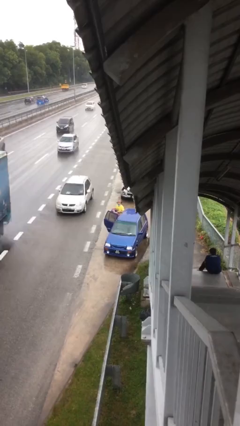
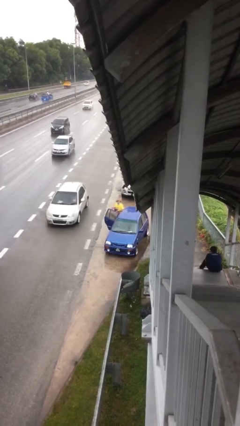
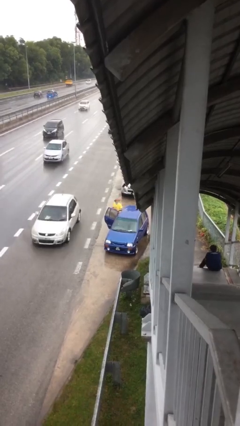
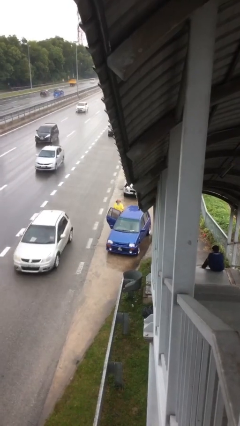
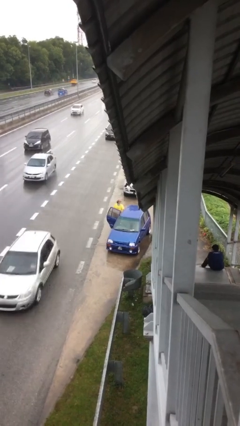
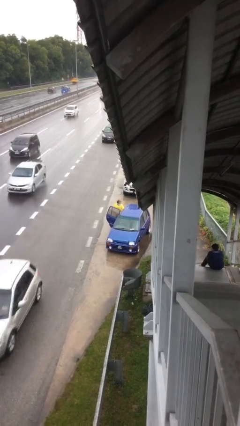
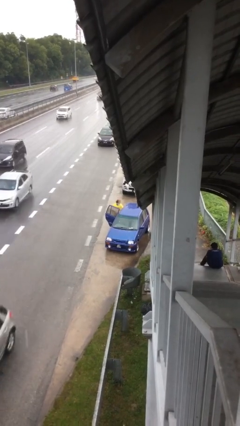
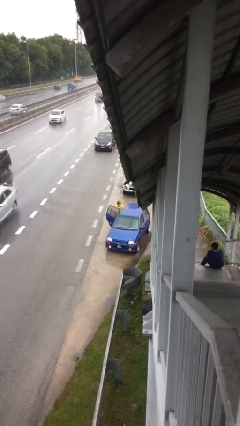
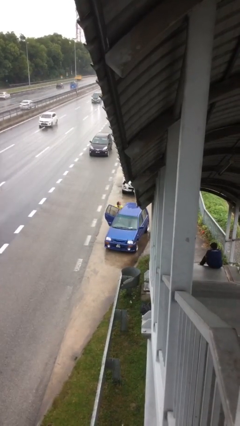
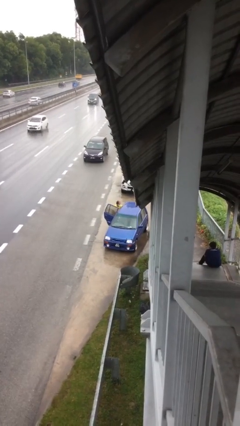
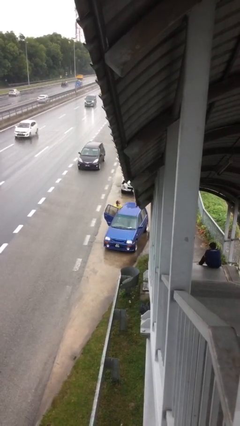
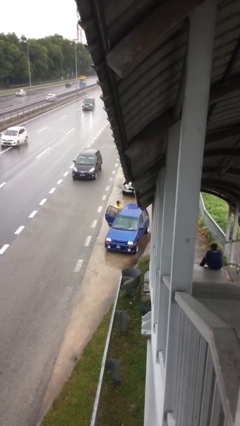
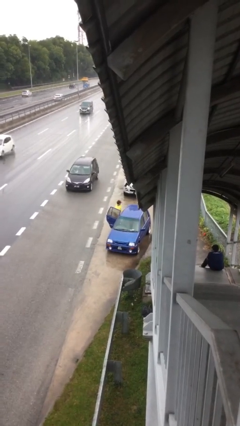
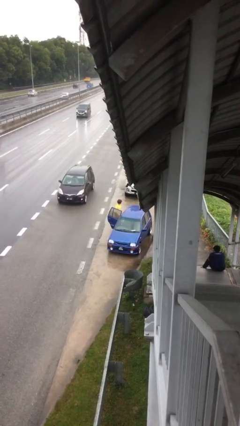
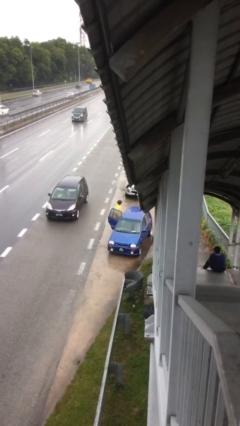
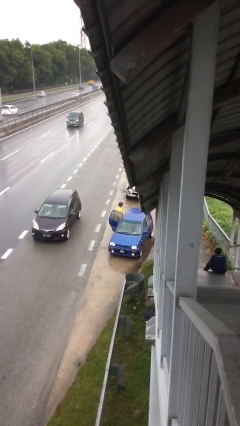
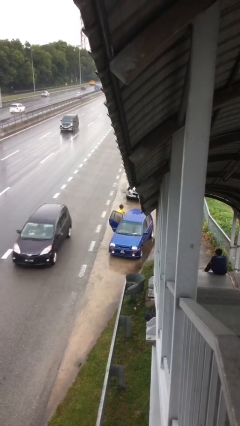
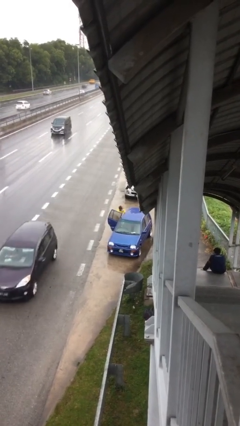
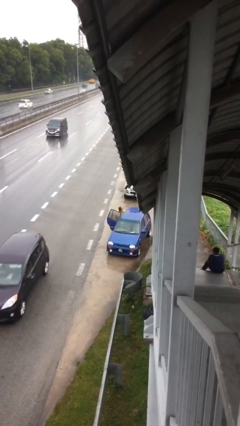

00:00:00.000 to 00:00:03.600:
person loads car

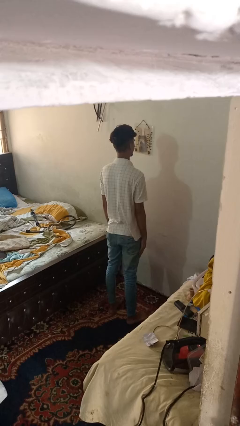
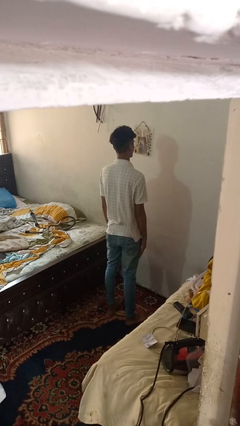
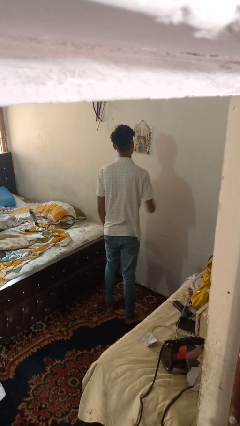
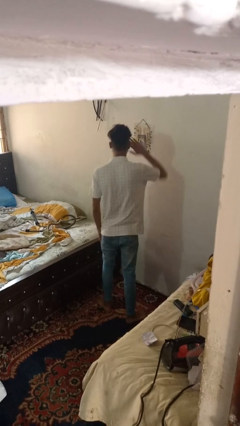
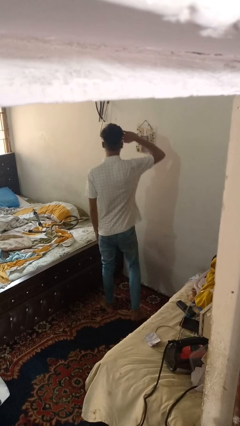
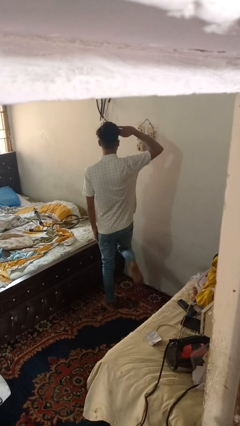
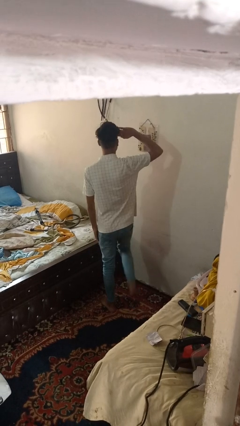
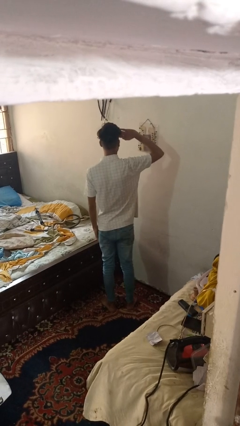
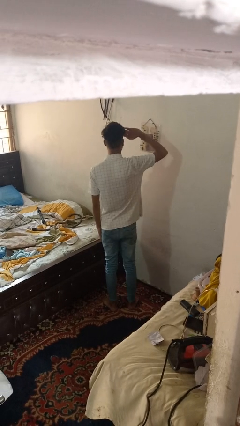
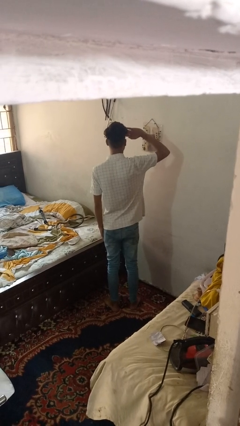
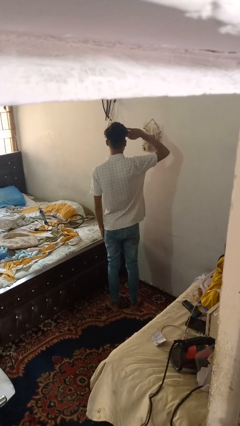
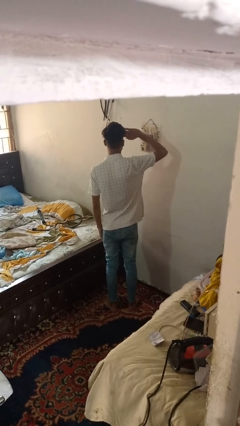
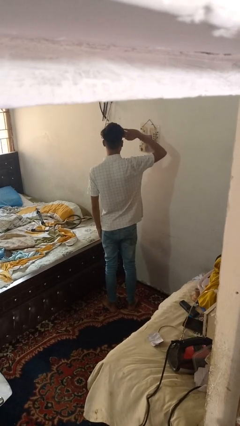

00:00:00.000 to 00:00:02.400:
person salutes

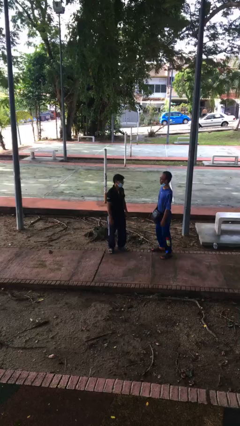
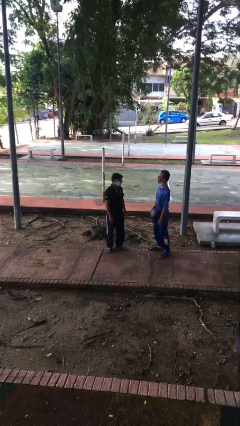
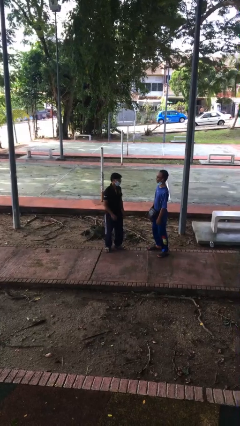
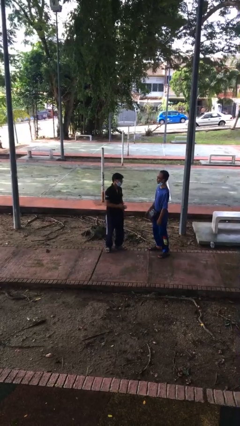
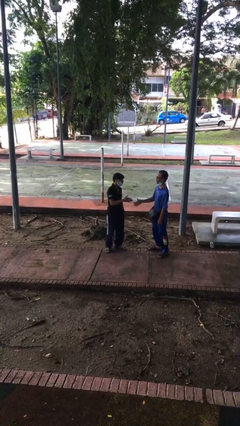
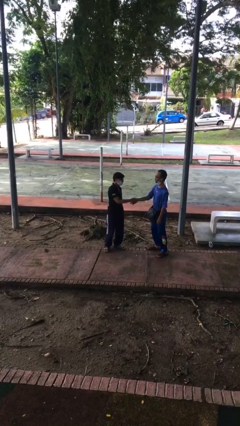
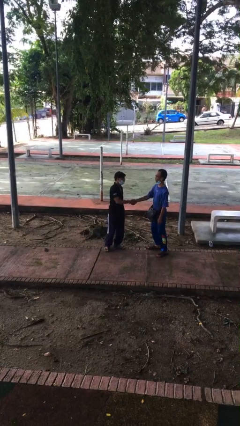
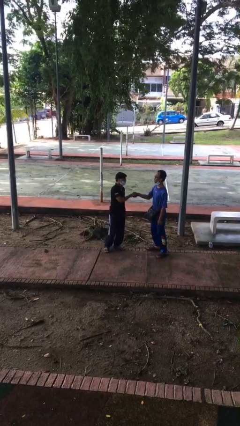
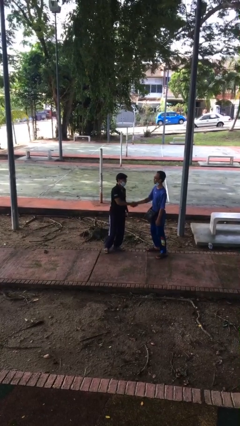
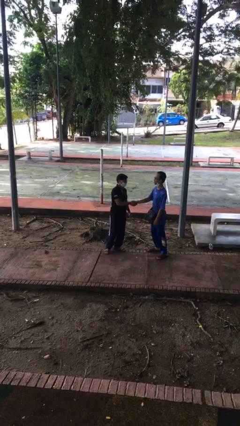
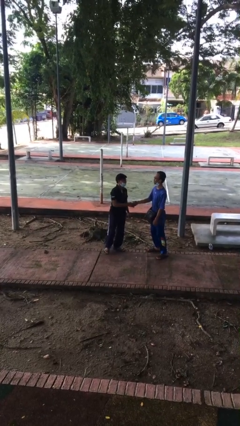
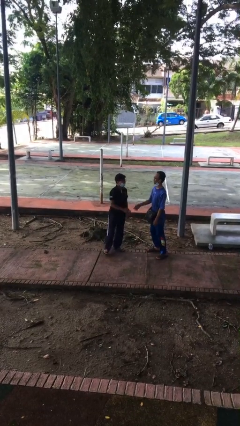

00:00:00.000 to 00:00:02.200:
person shakes hand

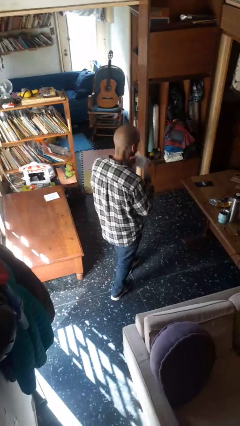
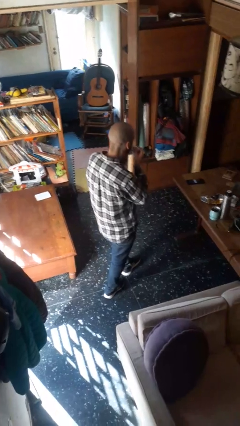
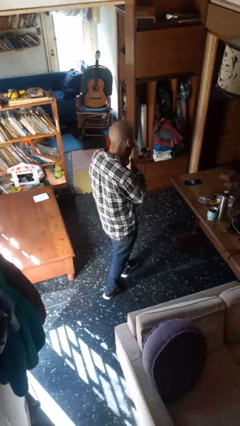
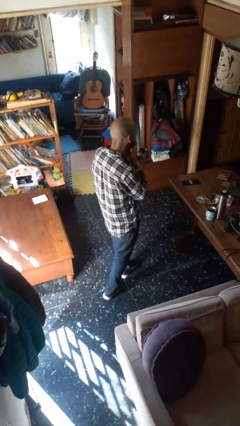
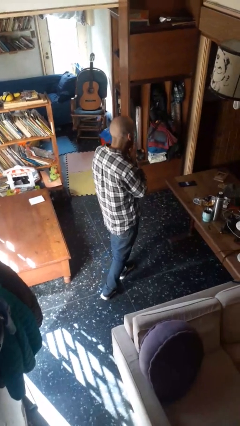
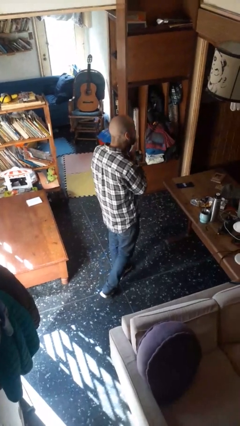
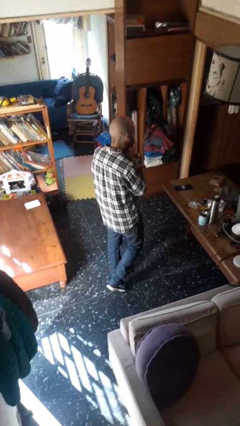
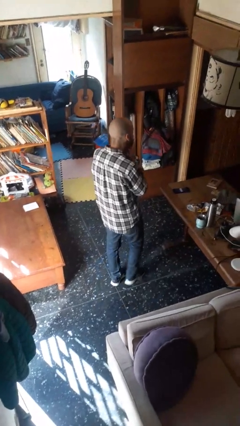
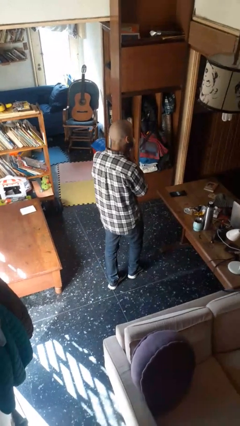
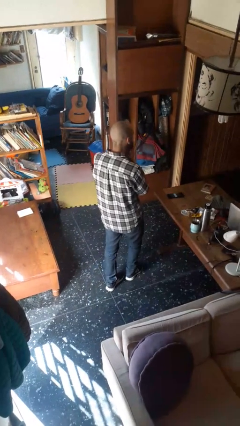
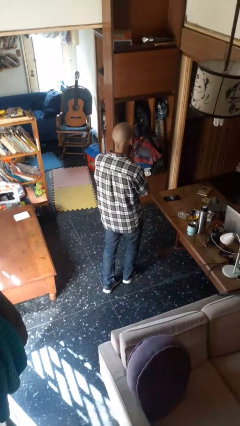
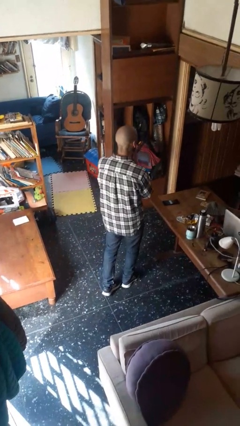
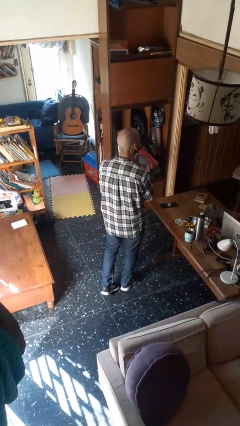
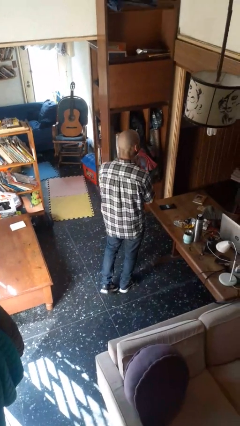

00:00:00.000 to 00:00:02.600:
person wipes mouth with napkin

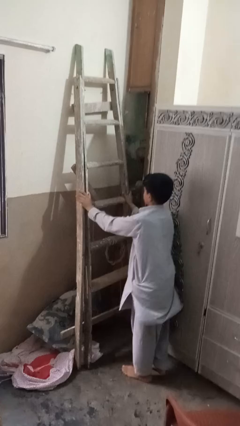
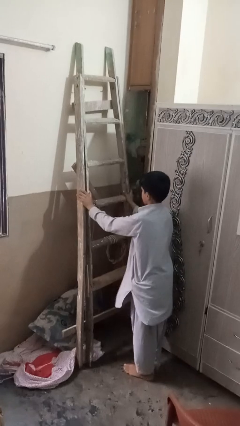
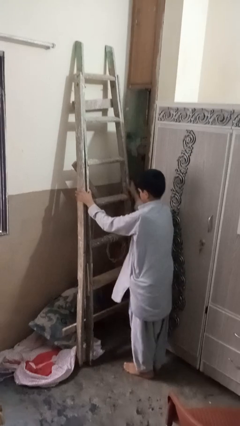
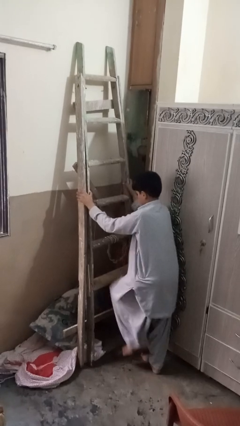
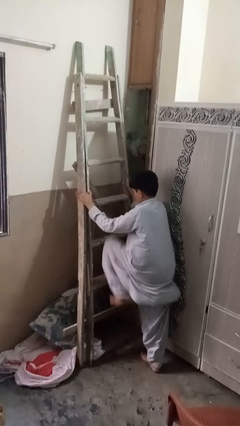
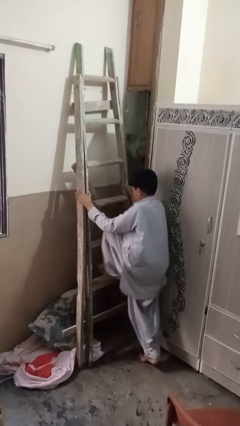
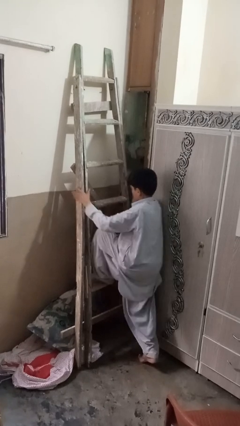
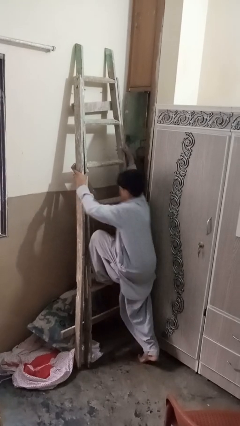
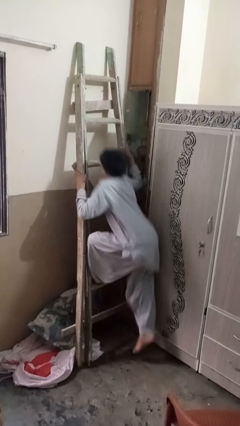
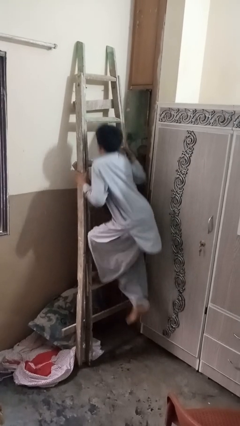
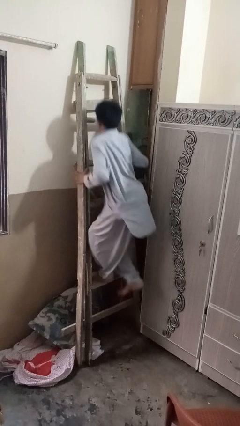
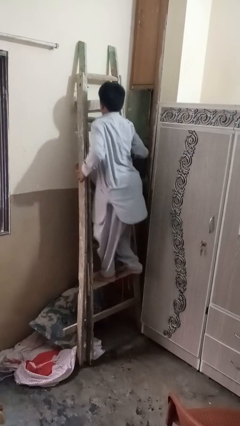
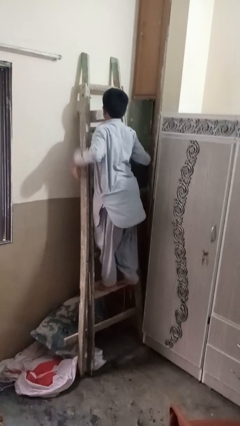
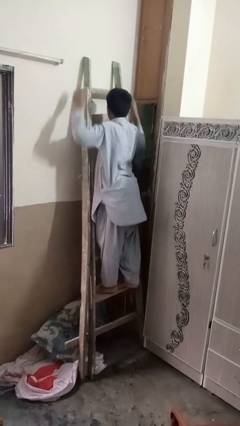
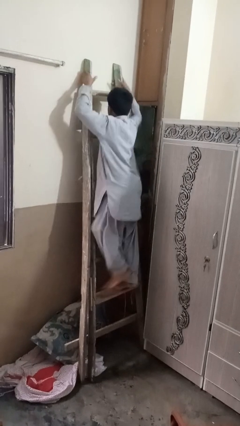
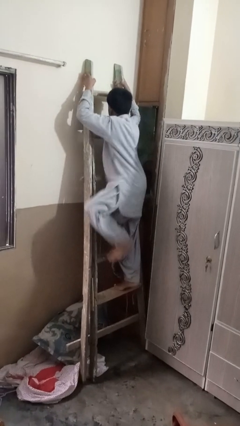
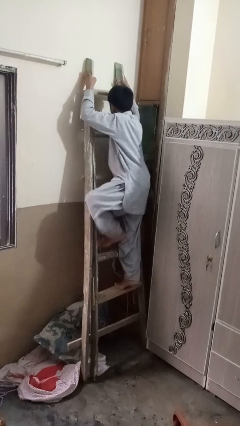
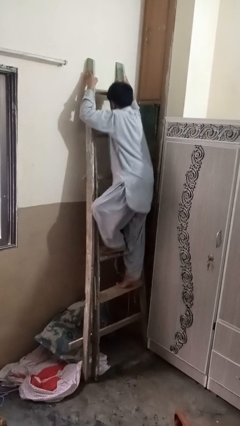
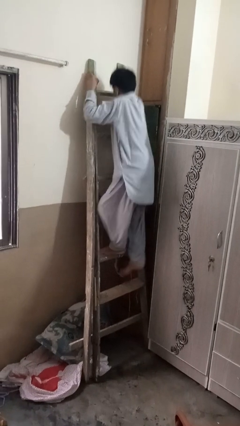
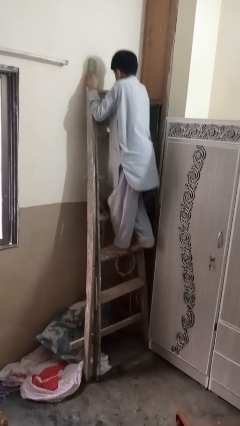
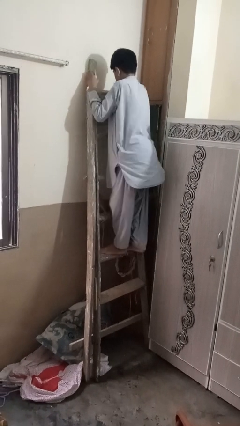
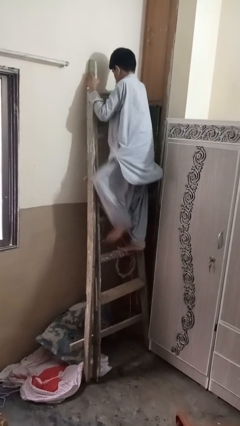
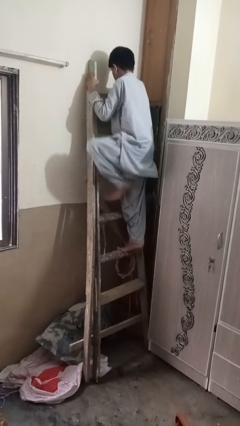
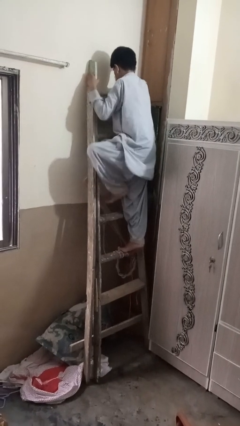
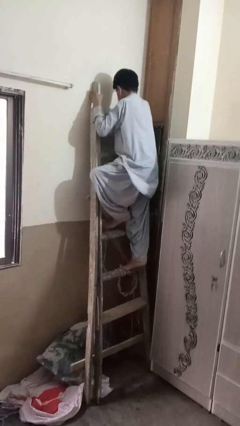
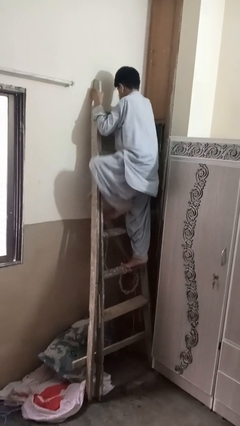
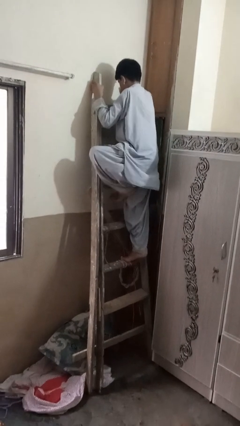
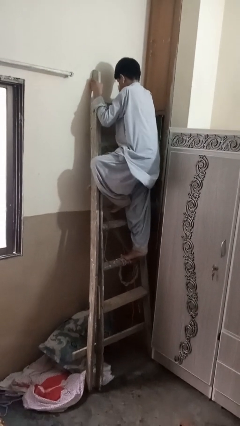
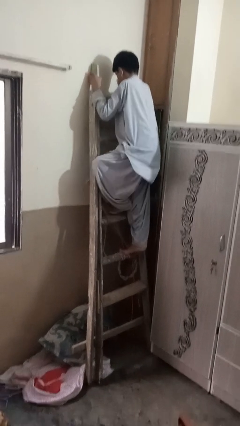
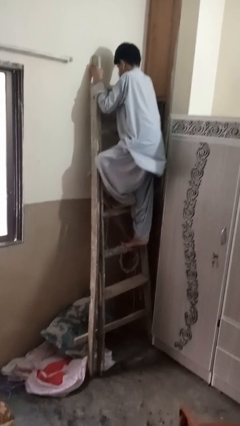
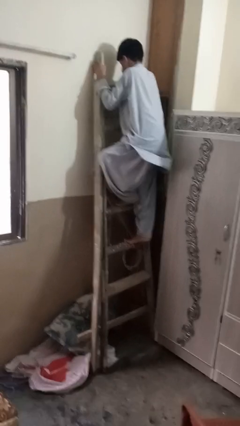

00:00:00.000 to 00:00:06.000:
person climbs up ladder

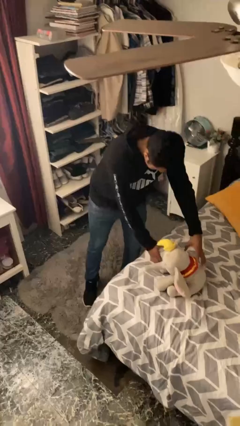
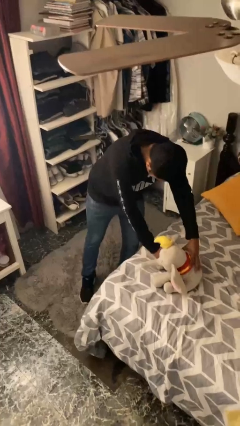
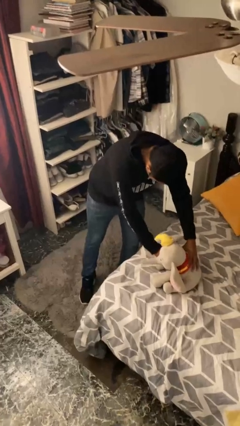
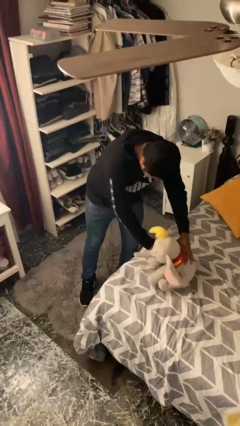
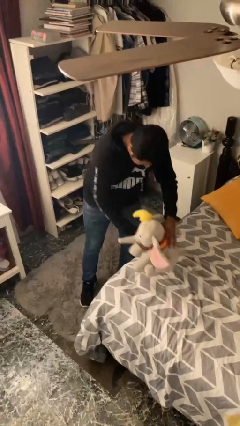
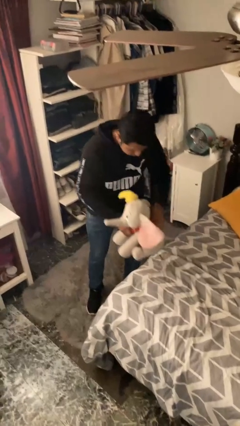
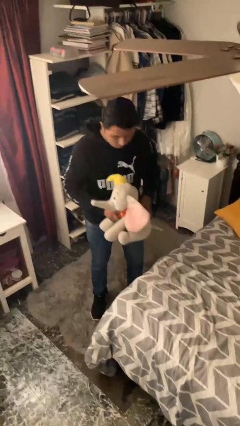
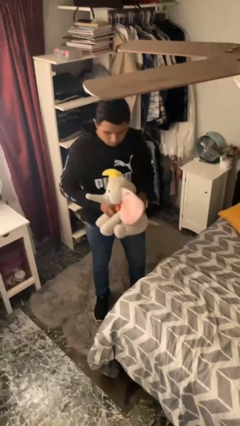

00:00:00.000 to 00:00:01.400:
person picks up object from bed
